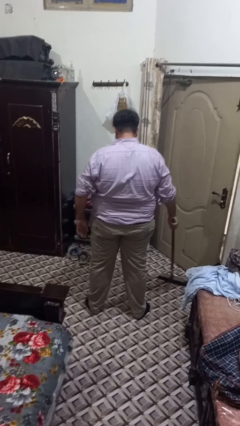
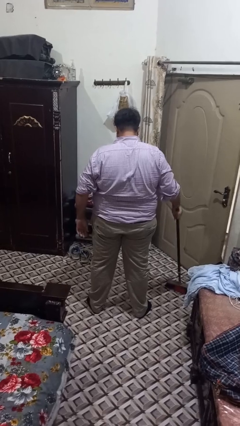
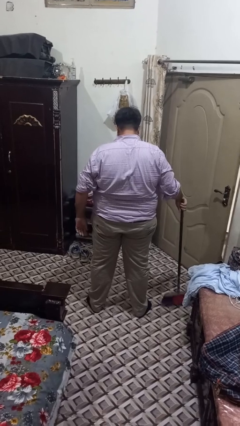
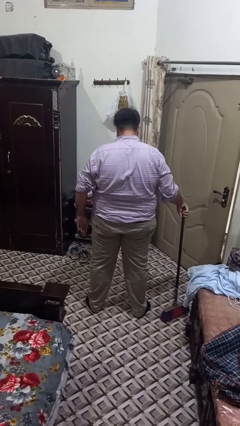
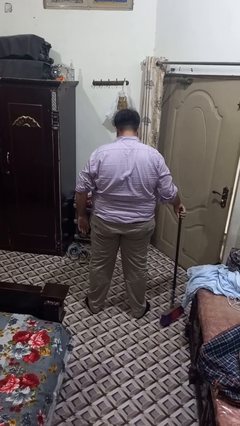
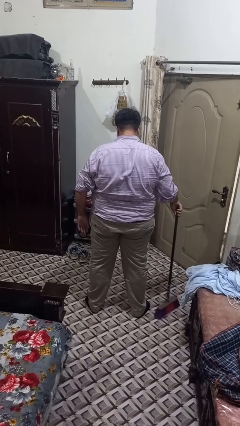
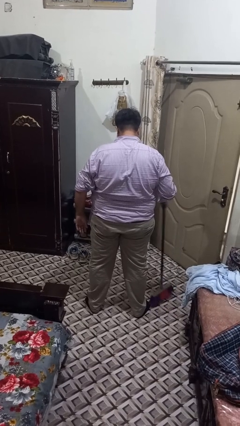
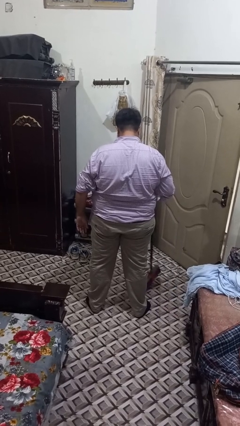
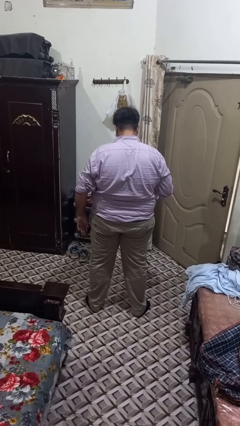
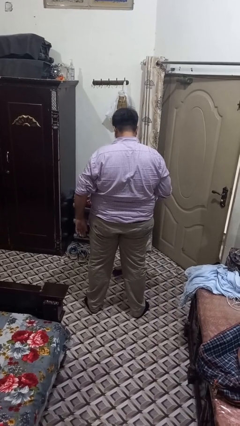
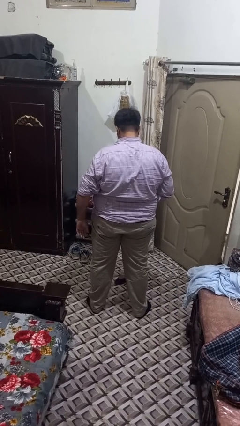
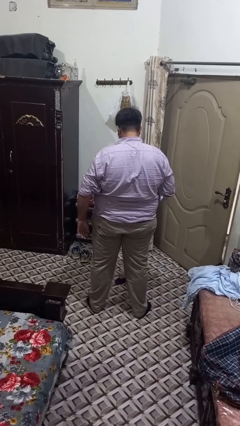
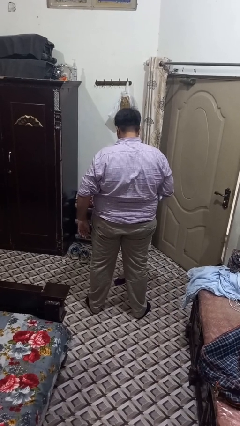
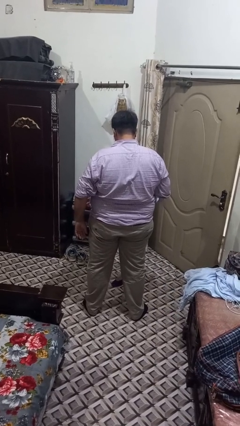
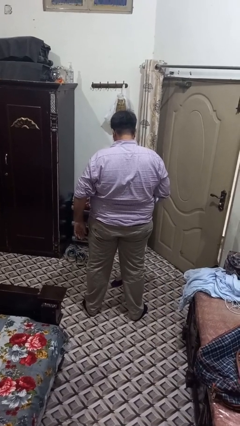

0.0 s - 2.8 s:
person sweeps floor

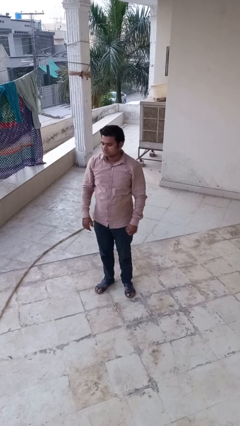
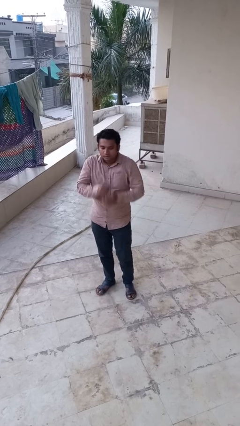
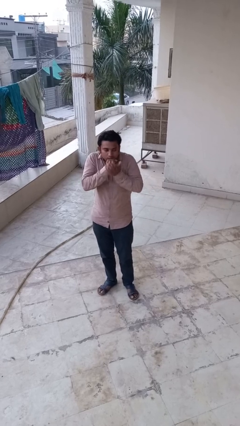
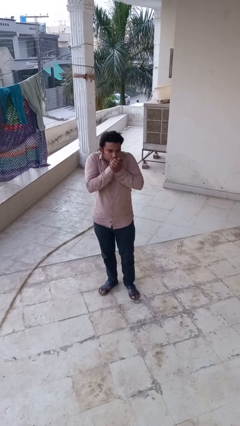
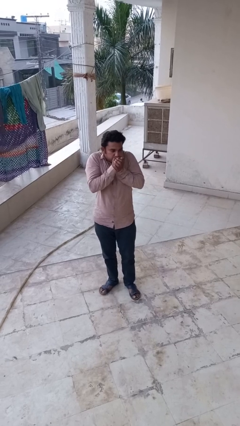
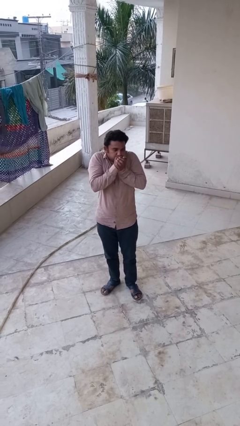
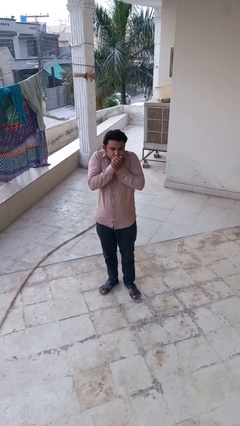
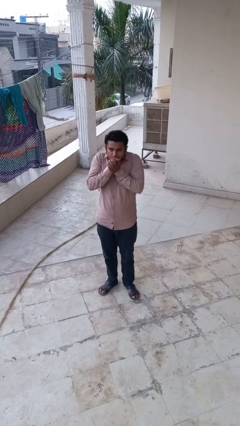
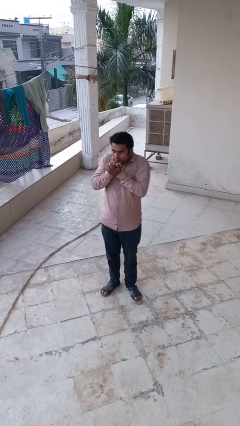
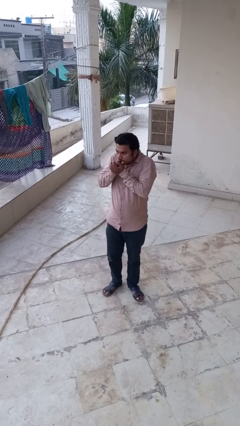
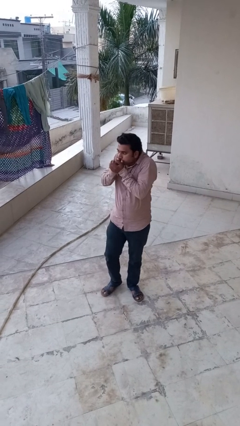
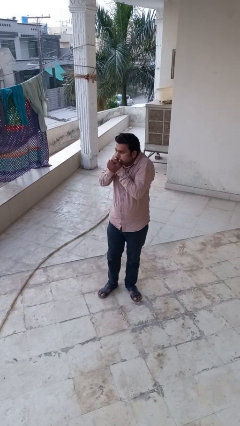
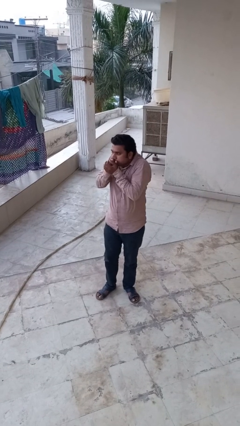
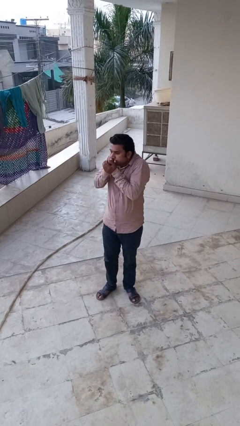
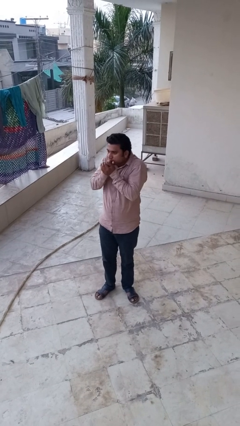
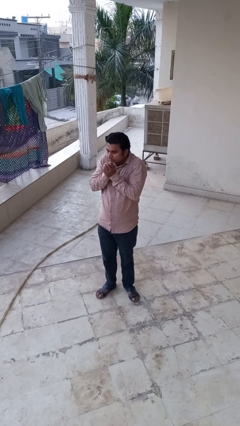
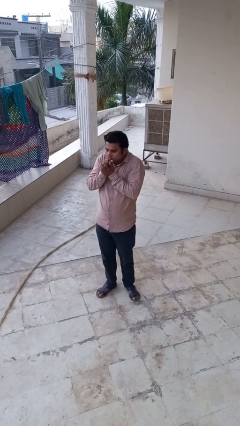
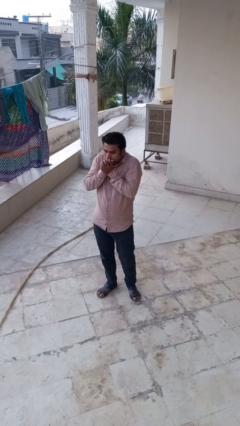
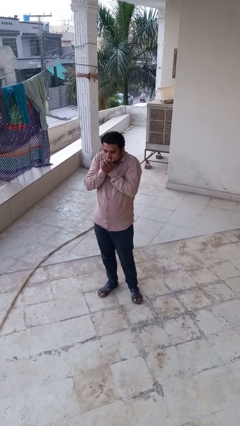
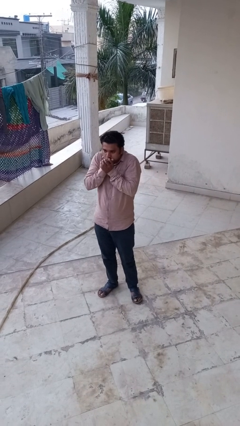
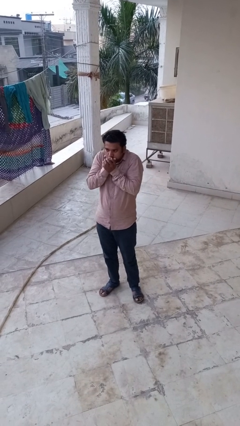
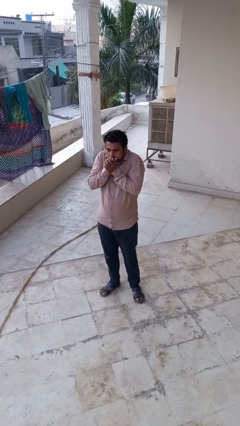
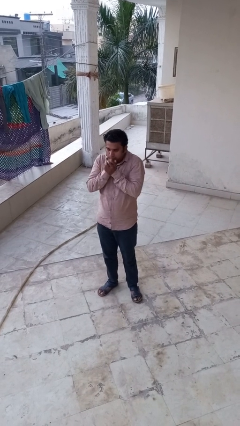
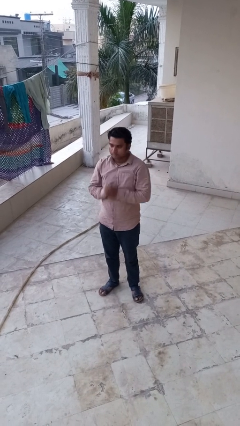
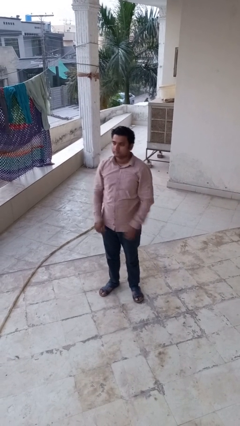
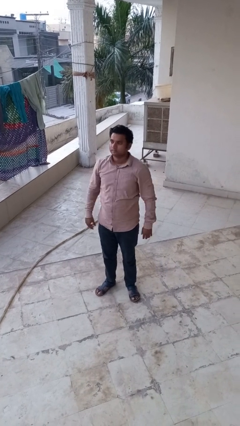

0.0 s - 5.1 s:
person blows into hands

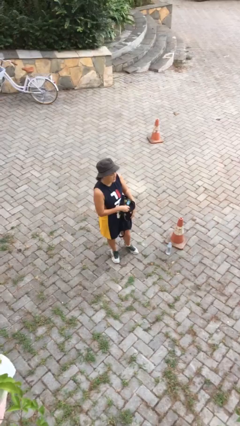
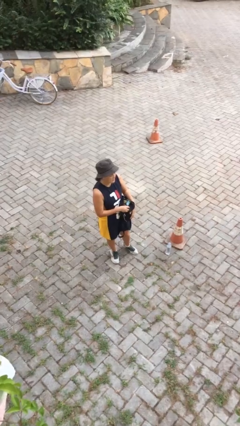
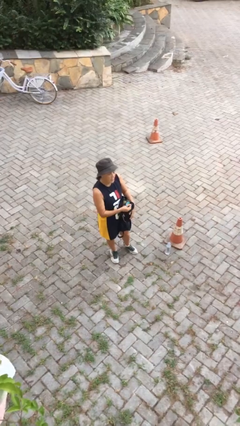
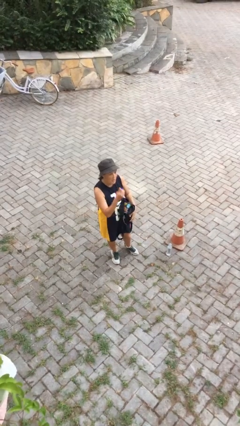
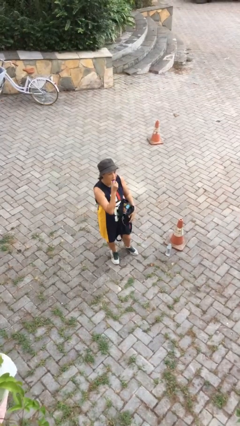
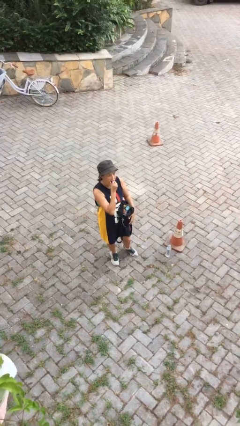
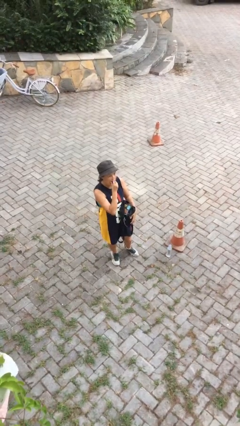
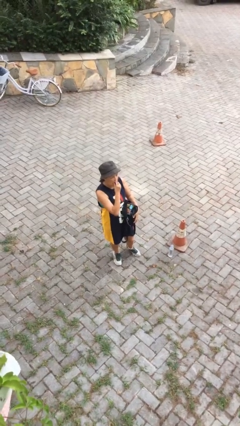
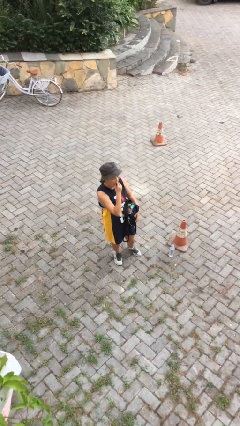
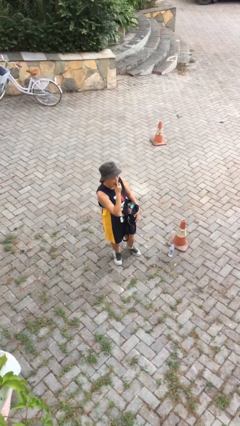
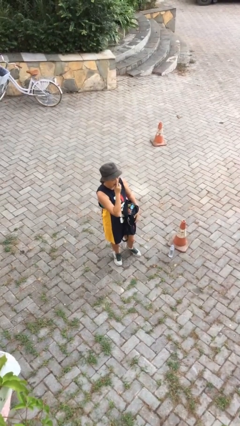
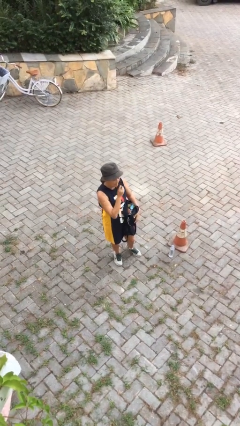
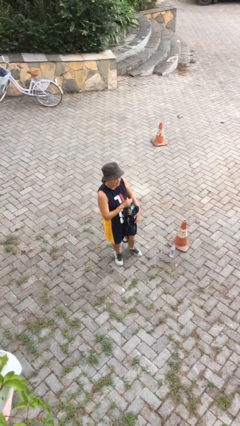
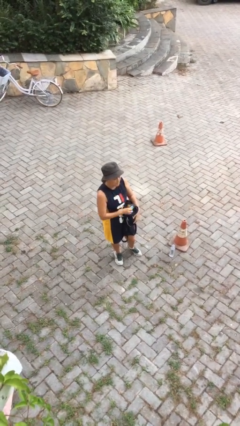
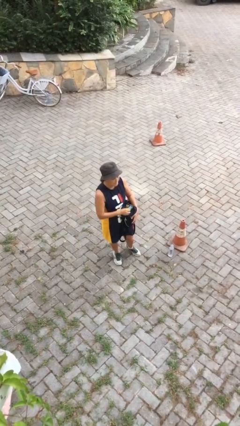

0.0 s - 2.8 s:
person eats snack from bag

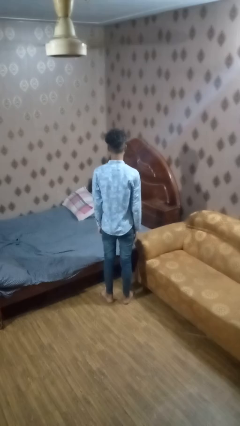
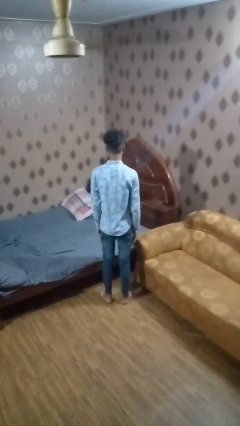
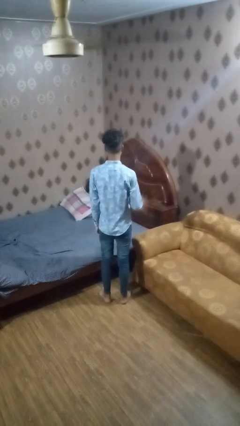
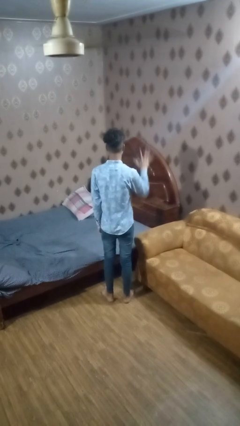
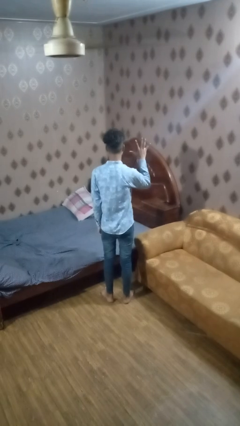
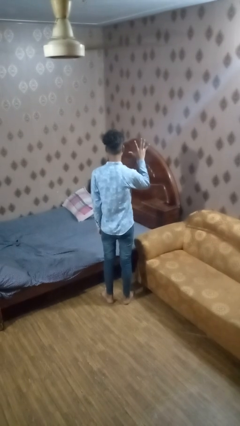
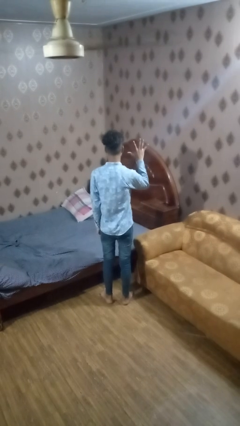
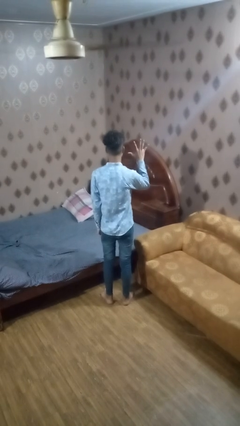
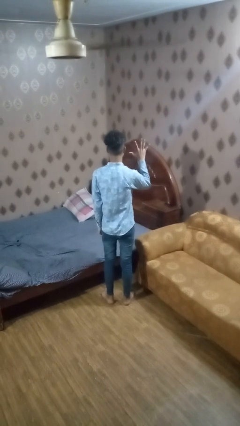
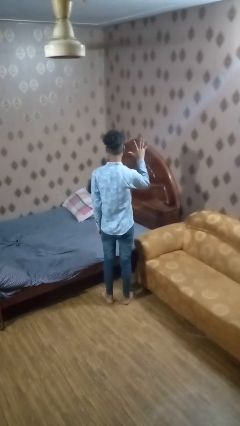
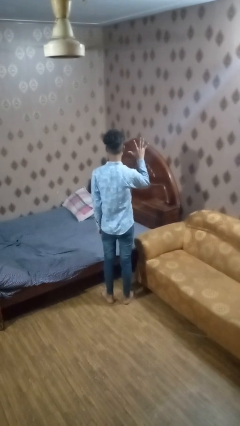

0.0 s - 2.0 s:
person gestures number five

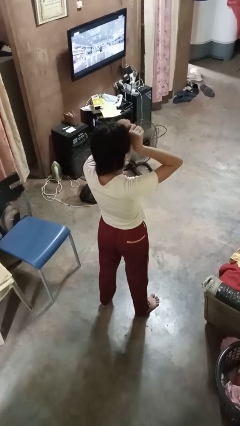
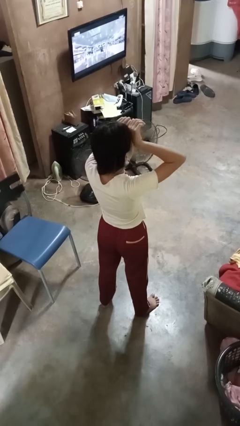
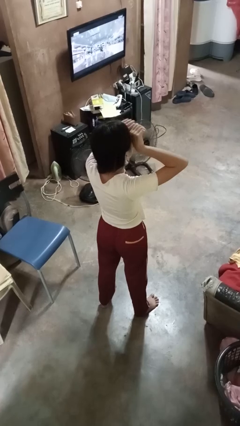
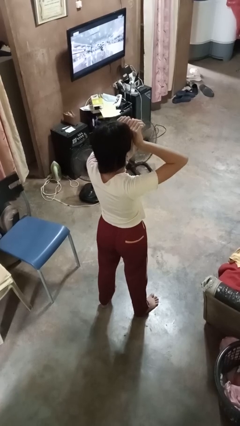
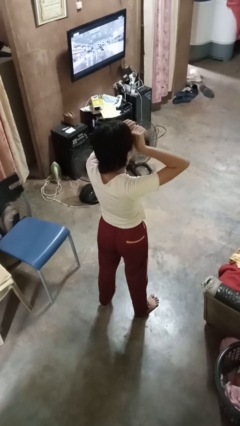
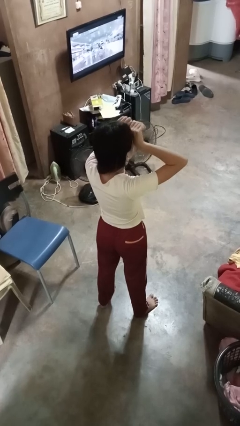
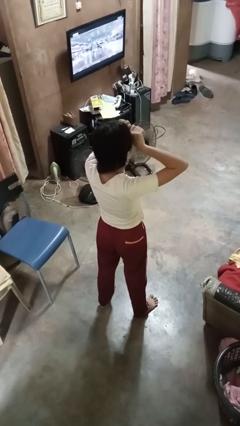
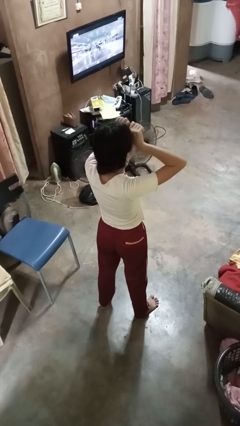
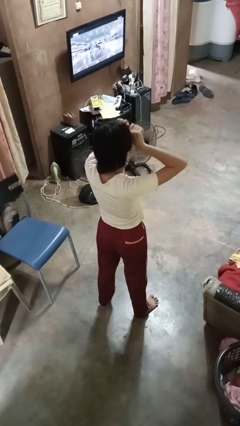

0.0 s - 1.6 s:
person rubs eyes

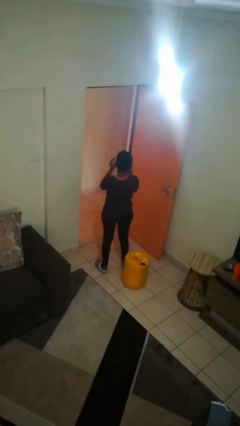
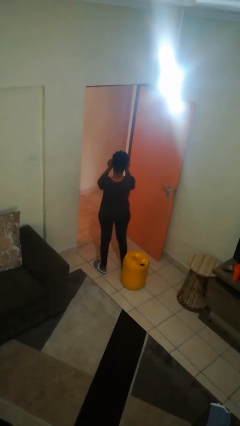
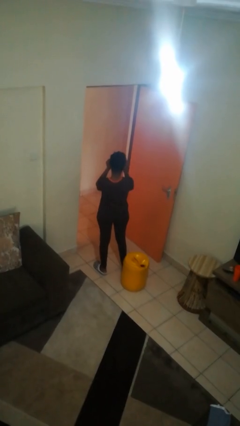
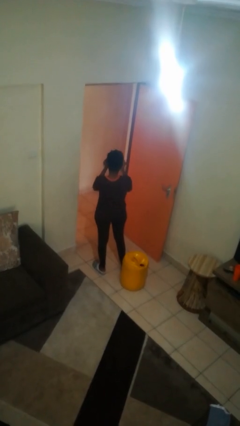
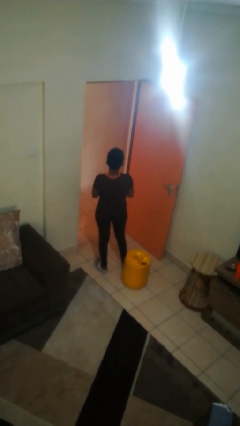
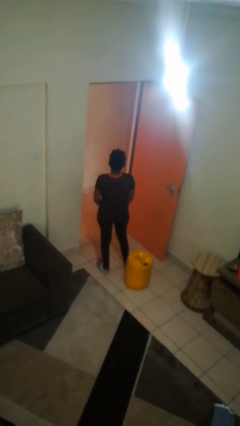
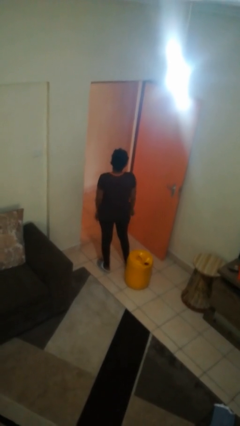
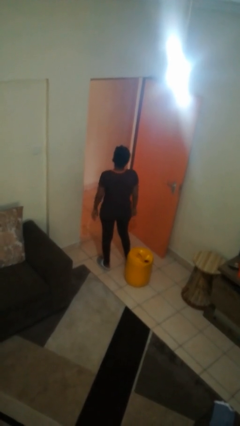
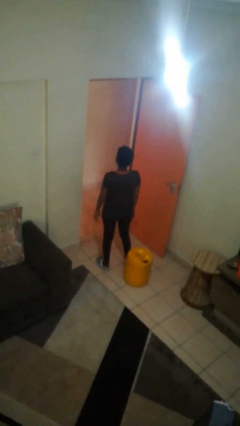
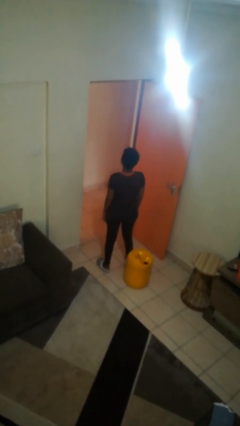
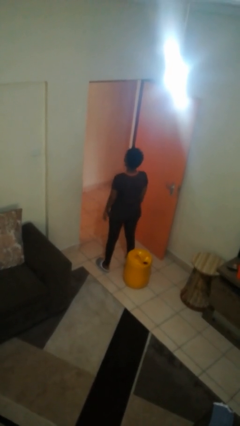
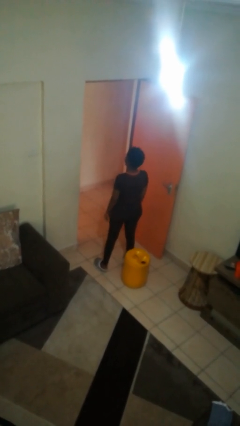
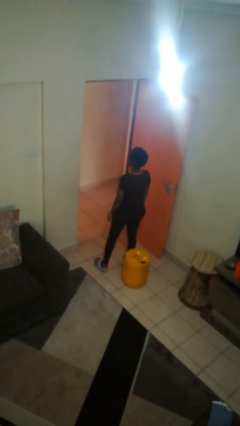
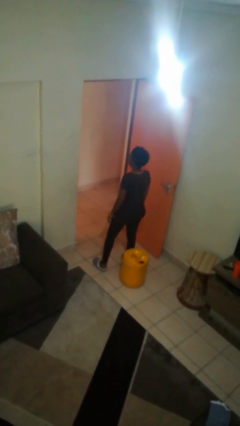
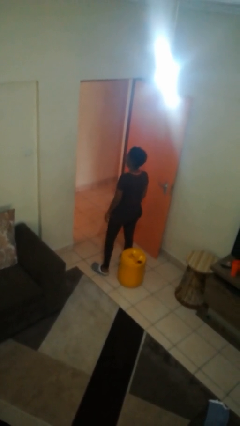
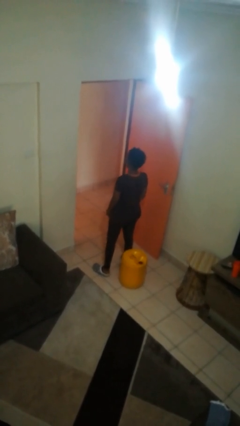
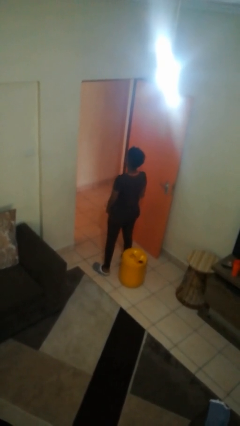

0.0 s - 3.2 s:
person takes off glasses
